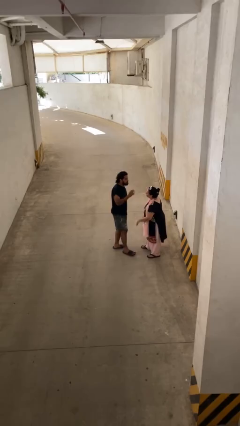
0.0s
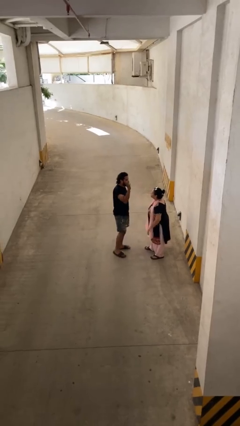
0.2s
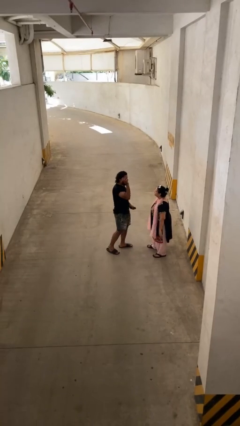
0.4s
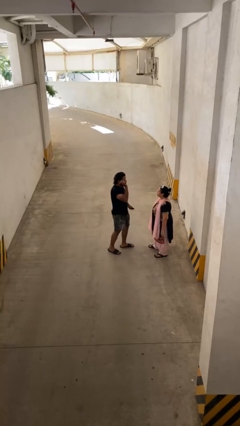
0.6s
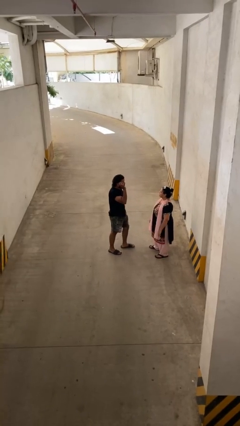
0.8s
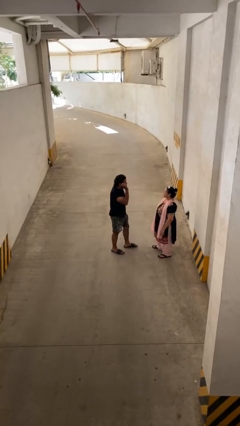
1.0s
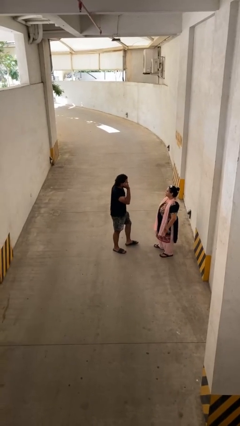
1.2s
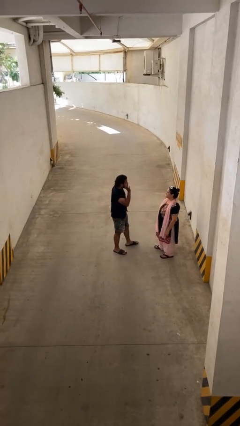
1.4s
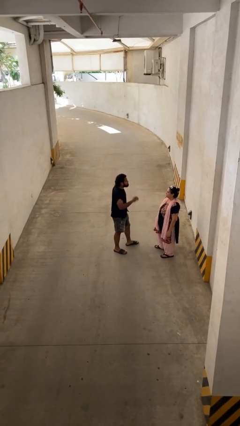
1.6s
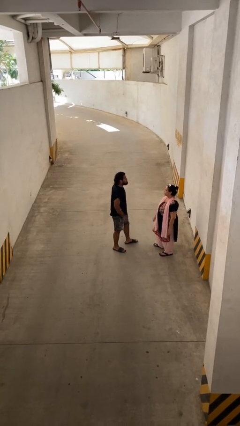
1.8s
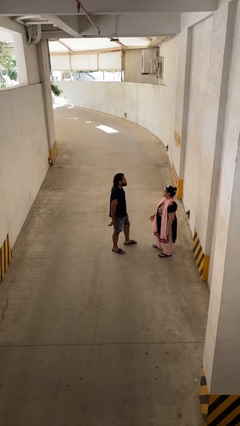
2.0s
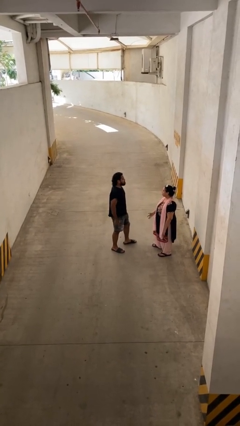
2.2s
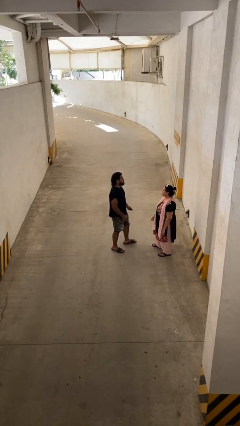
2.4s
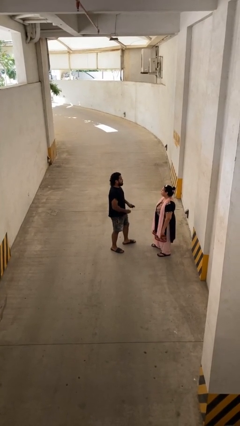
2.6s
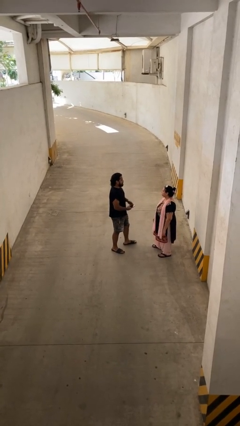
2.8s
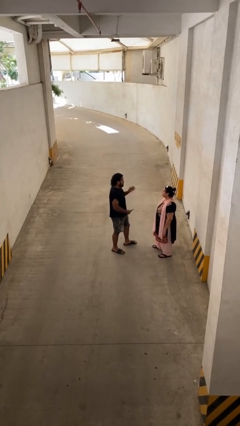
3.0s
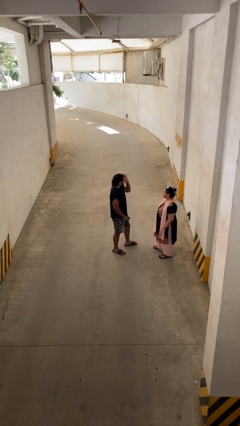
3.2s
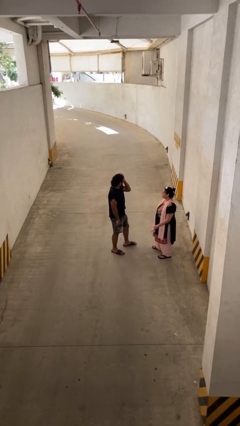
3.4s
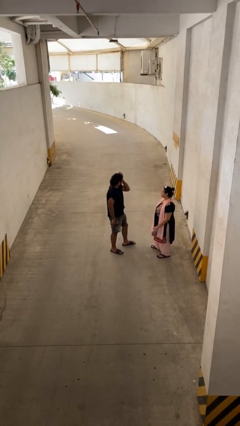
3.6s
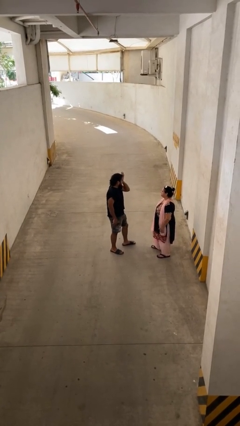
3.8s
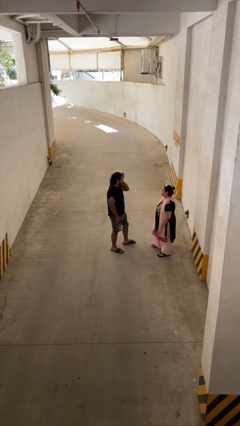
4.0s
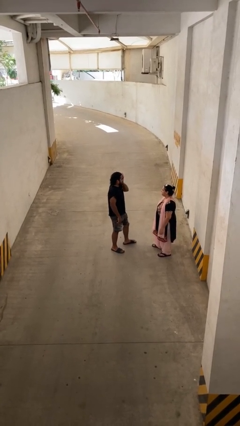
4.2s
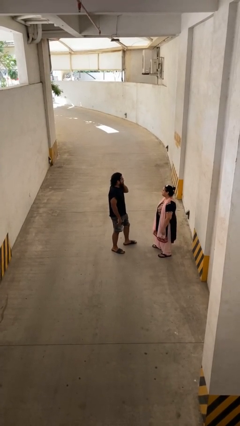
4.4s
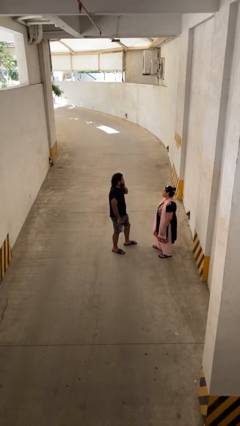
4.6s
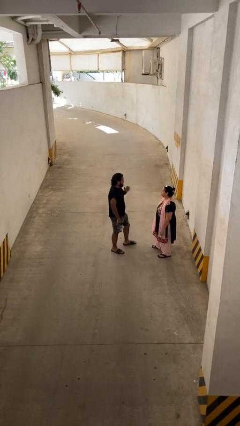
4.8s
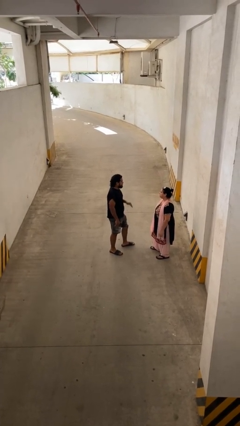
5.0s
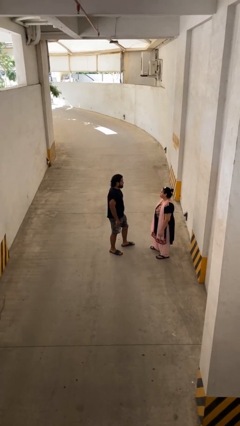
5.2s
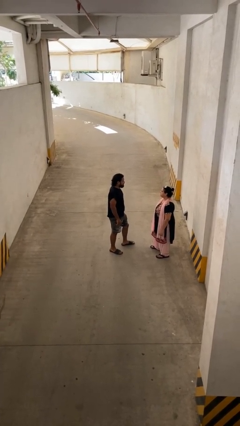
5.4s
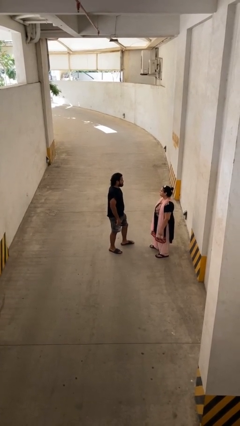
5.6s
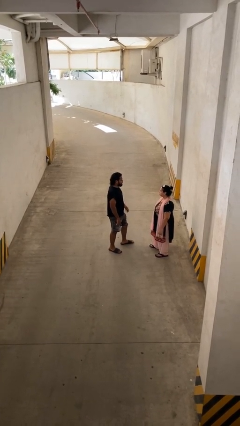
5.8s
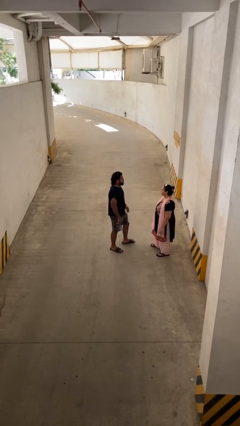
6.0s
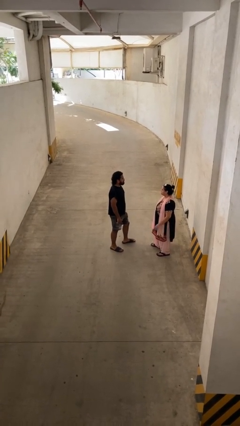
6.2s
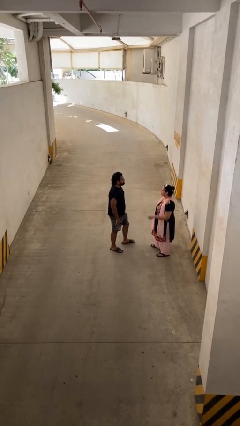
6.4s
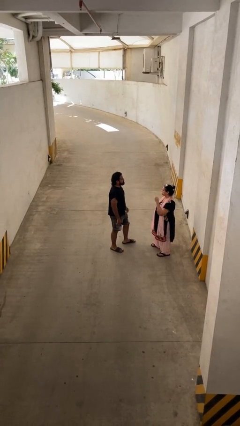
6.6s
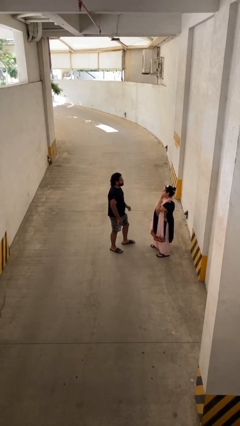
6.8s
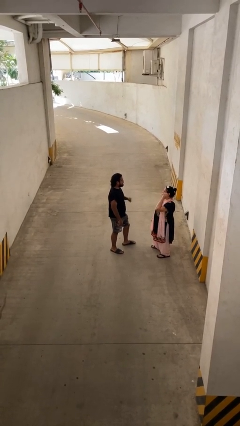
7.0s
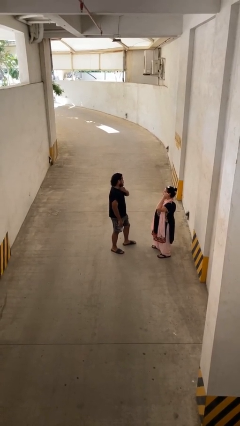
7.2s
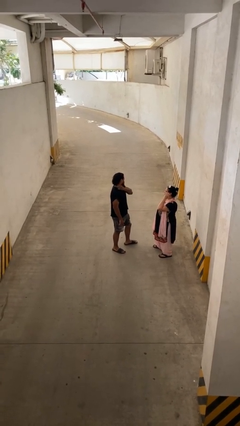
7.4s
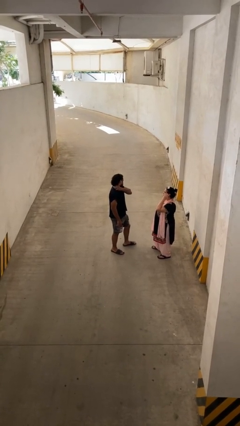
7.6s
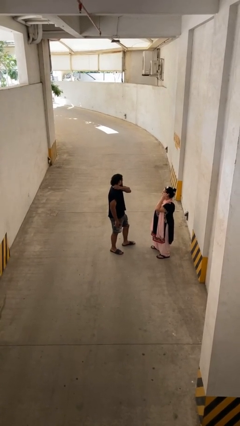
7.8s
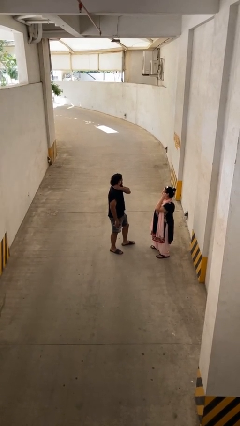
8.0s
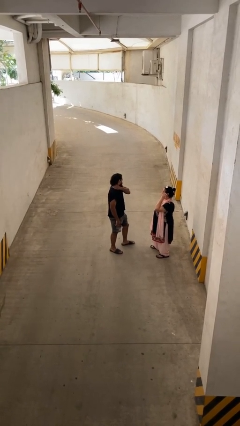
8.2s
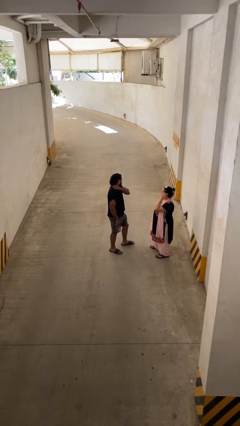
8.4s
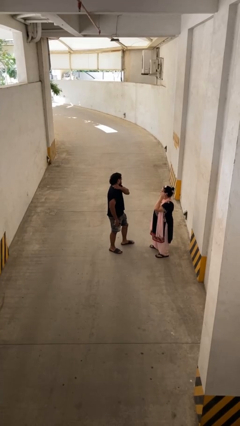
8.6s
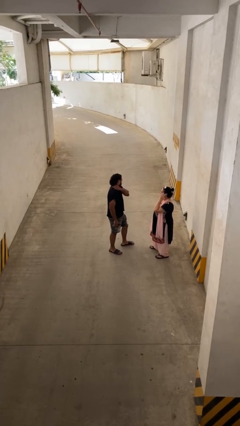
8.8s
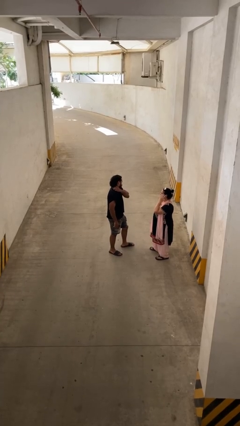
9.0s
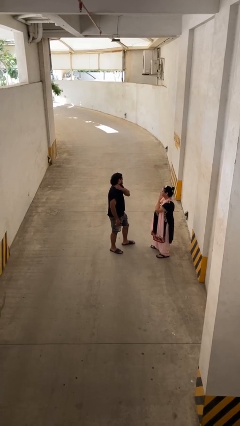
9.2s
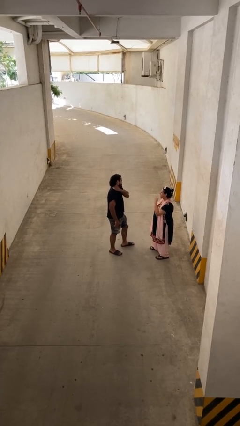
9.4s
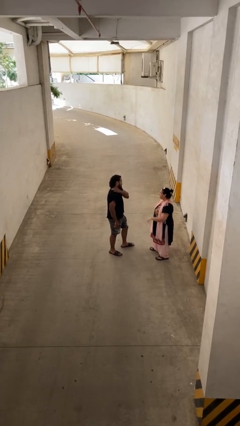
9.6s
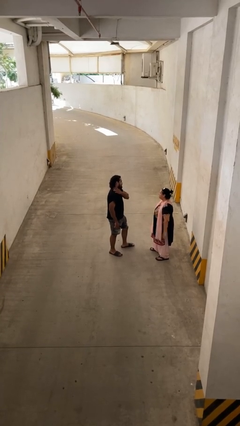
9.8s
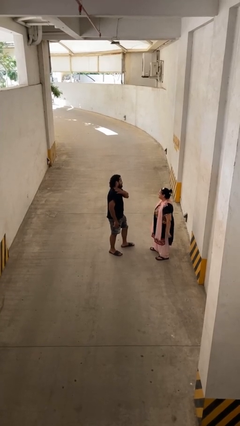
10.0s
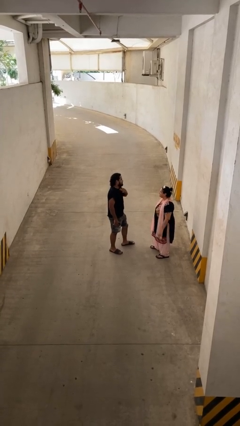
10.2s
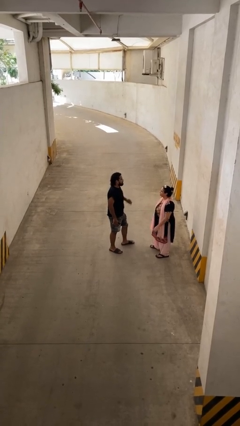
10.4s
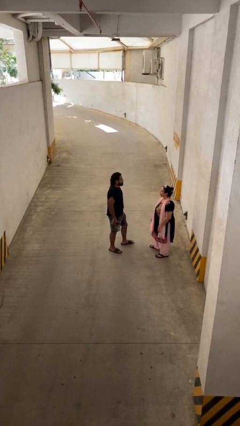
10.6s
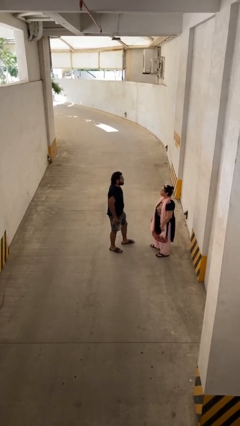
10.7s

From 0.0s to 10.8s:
person talks to person

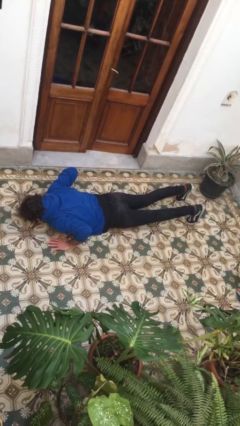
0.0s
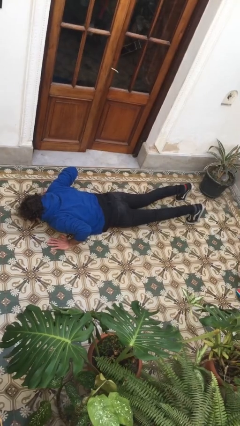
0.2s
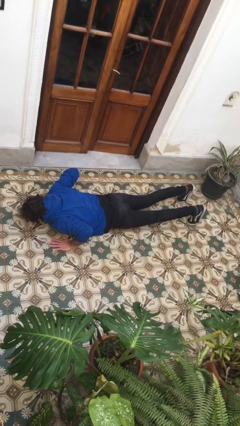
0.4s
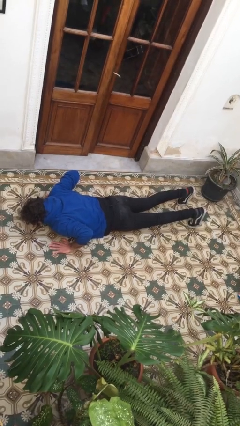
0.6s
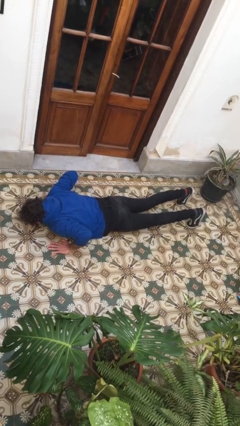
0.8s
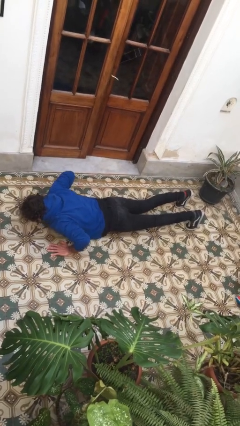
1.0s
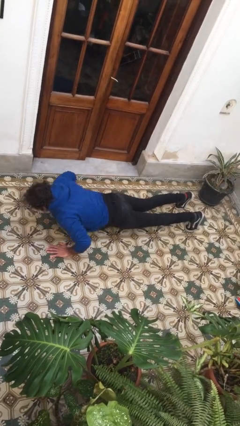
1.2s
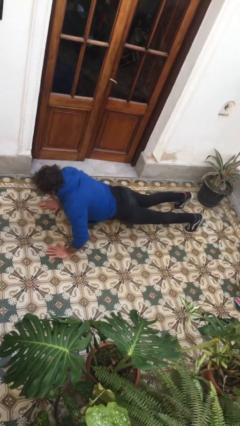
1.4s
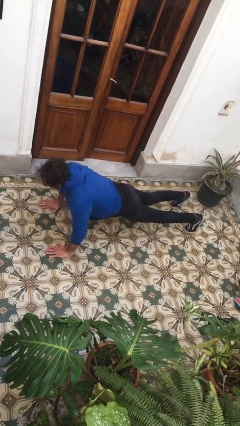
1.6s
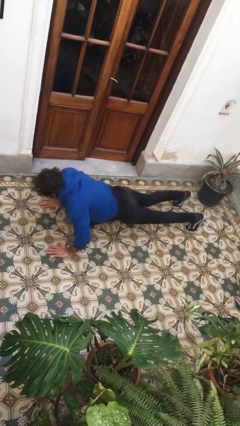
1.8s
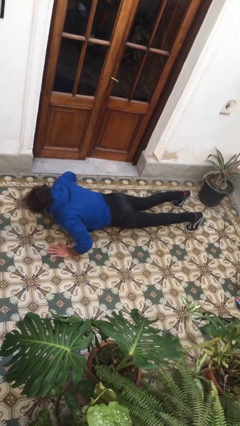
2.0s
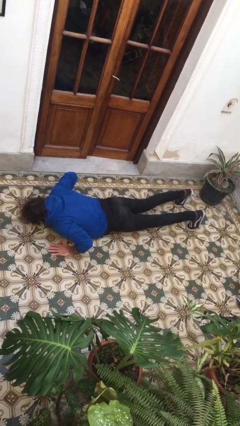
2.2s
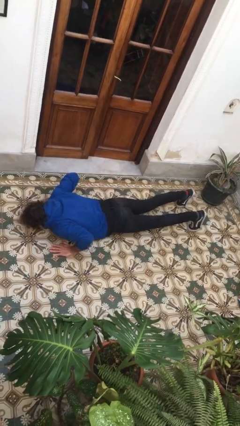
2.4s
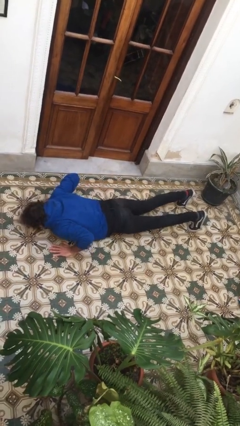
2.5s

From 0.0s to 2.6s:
person exercises with pushup

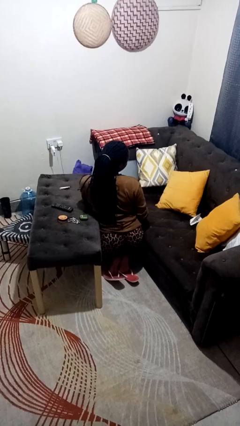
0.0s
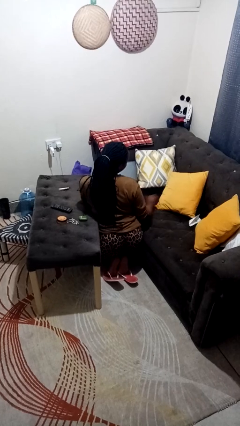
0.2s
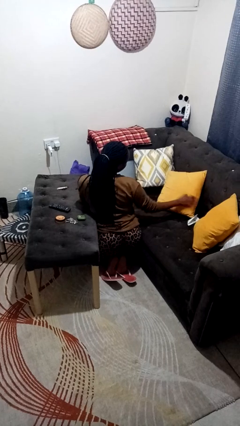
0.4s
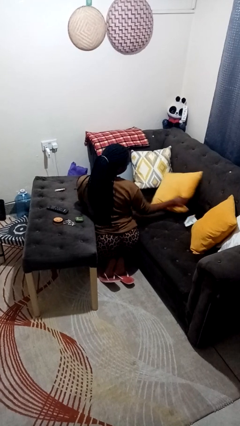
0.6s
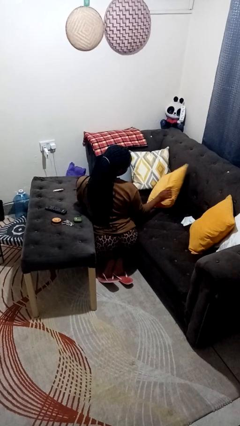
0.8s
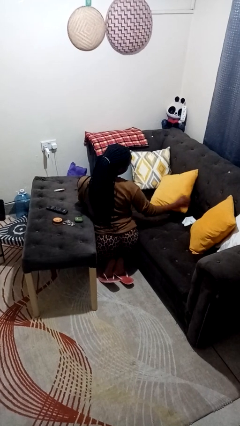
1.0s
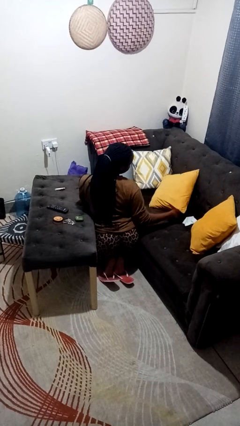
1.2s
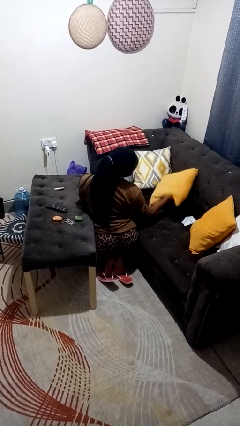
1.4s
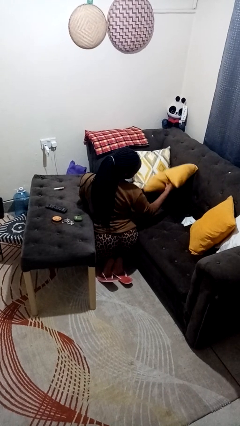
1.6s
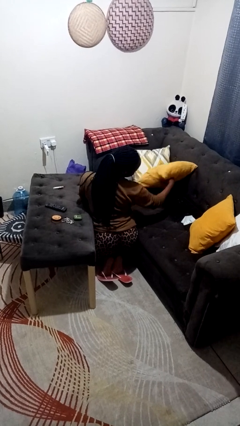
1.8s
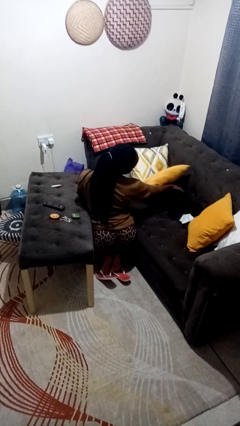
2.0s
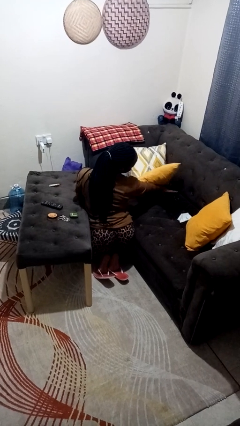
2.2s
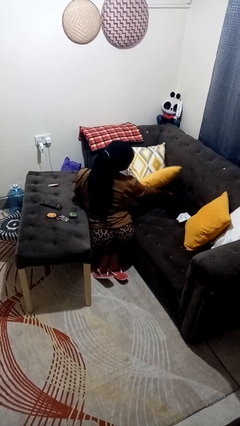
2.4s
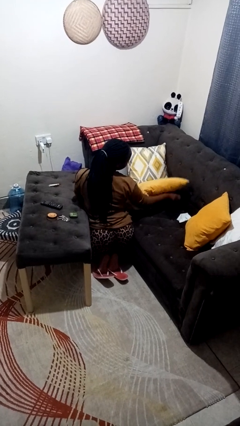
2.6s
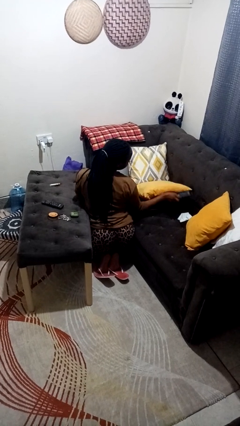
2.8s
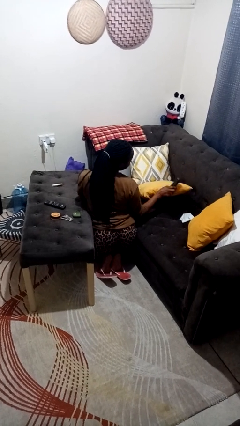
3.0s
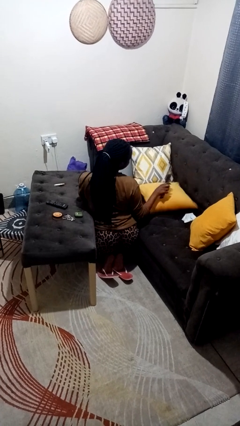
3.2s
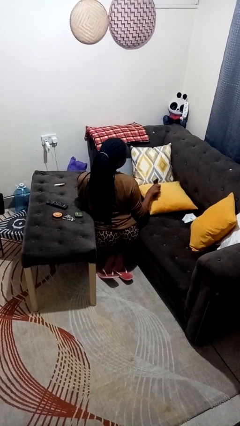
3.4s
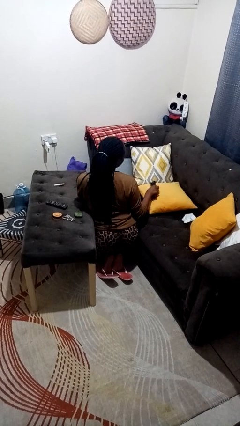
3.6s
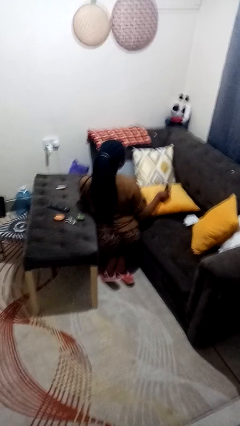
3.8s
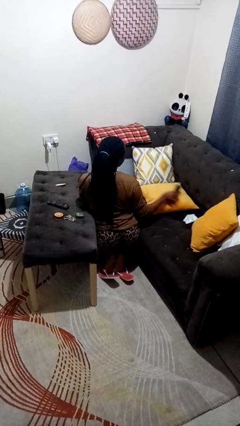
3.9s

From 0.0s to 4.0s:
person searches in couch

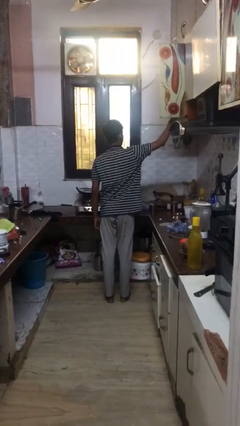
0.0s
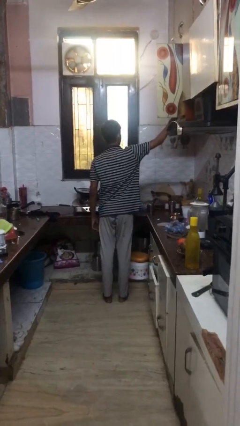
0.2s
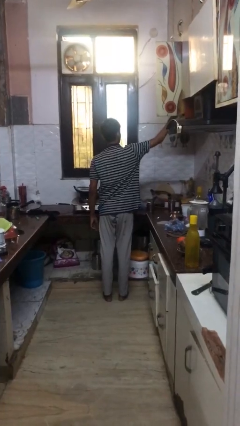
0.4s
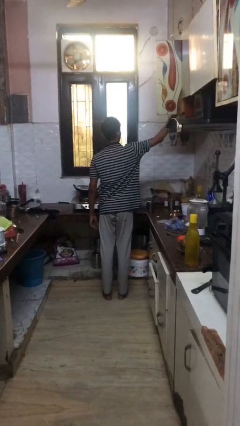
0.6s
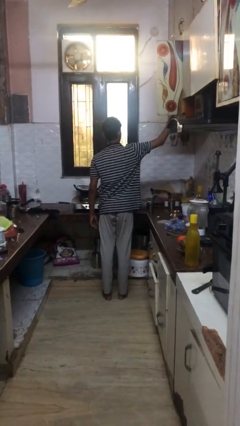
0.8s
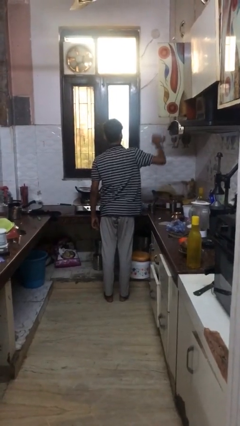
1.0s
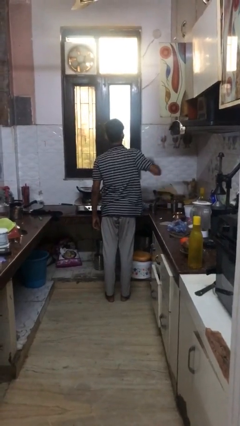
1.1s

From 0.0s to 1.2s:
person takes object from cabinet
